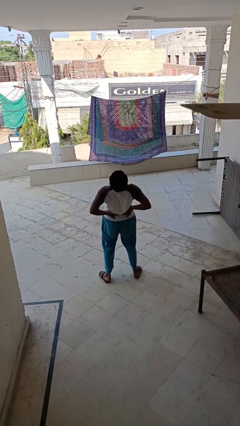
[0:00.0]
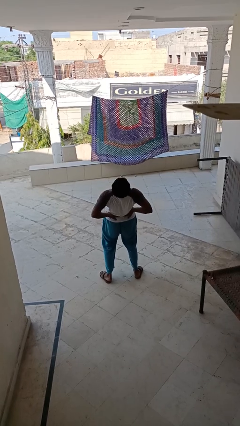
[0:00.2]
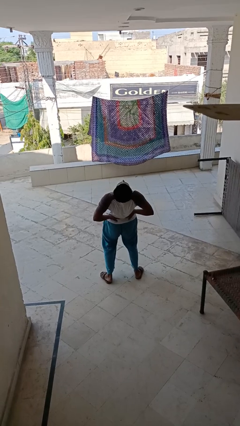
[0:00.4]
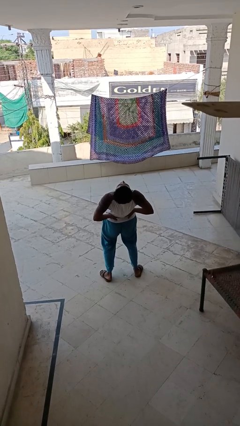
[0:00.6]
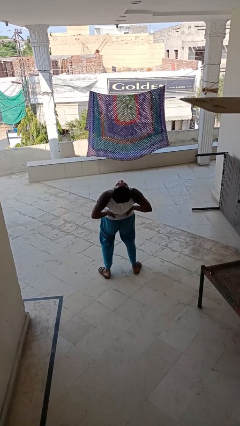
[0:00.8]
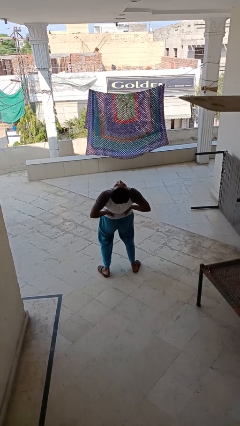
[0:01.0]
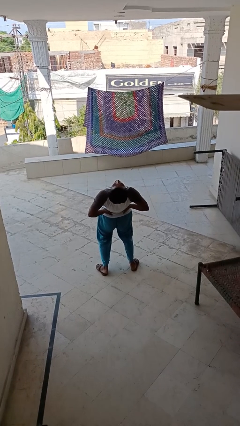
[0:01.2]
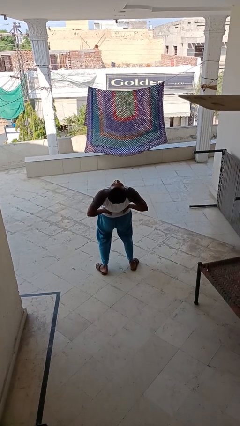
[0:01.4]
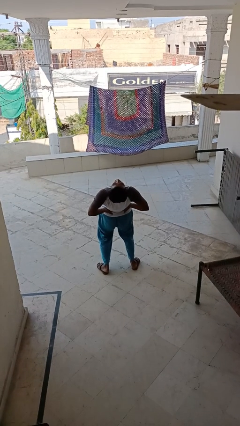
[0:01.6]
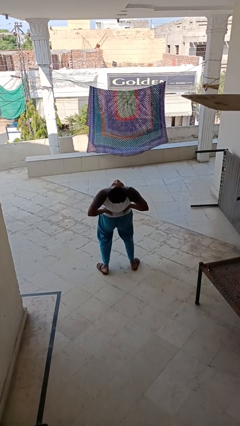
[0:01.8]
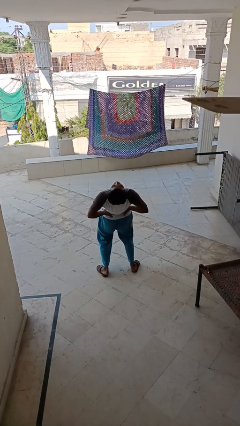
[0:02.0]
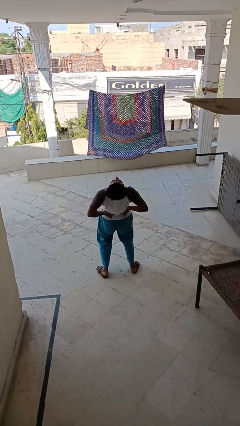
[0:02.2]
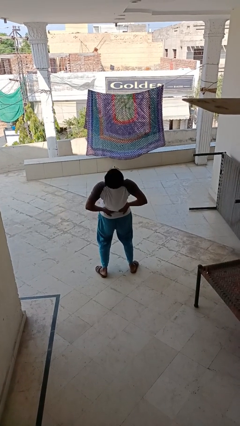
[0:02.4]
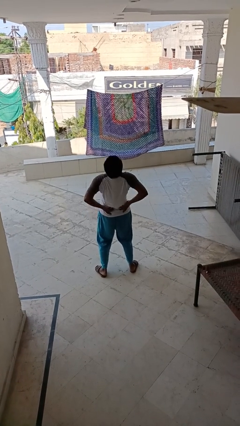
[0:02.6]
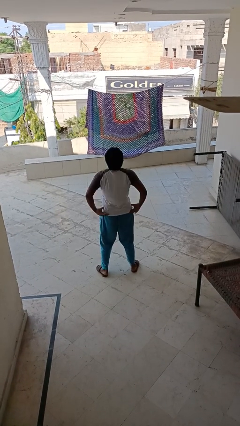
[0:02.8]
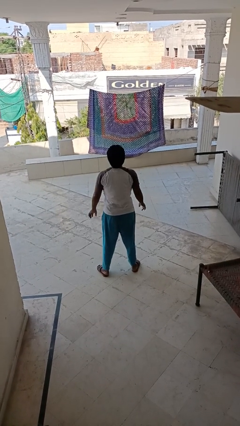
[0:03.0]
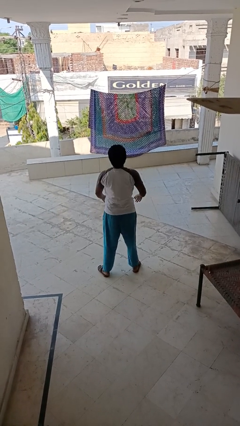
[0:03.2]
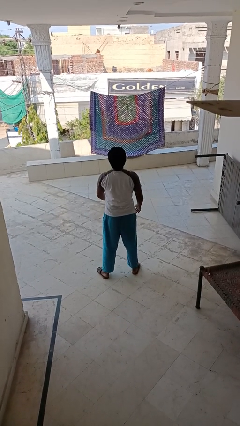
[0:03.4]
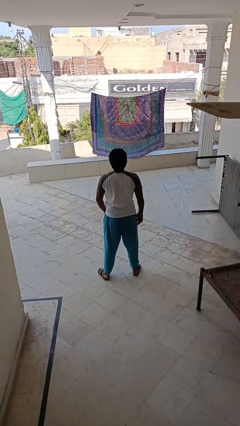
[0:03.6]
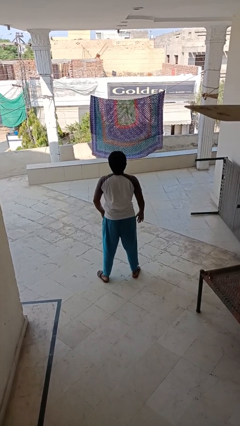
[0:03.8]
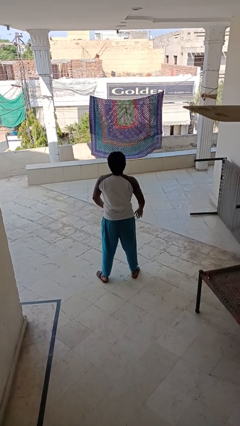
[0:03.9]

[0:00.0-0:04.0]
person stretches back

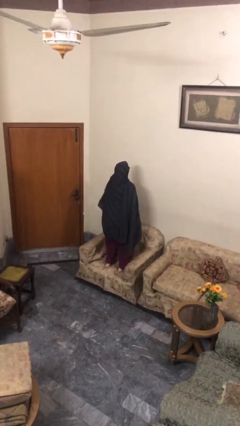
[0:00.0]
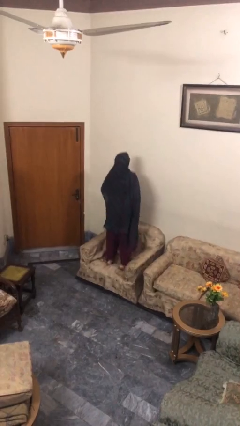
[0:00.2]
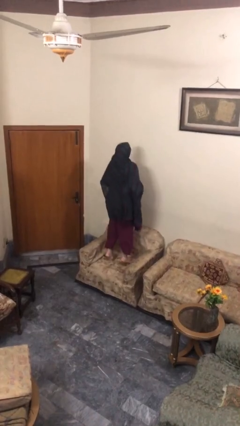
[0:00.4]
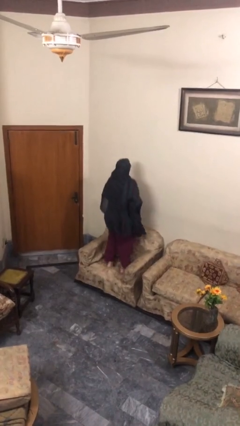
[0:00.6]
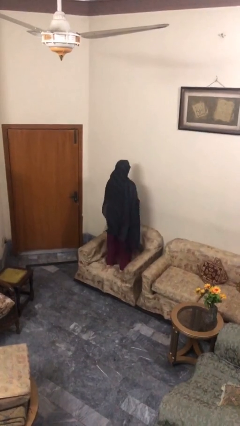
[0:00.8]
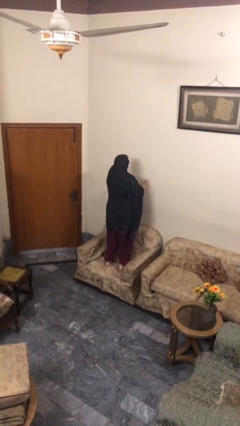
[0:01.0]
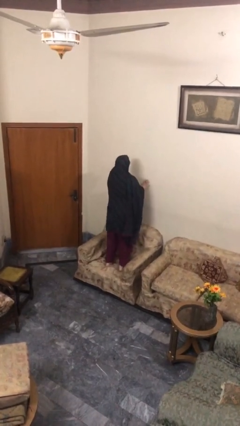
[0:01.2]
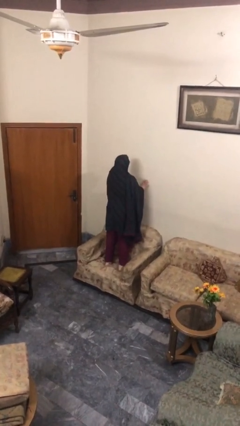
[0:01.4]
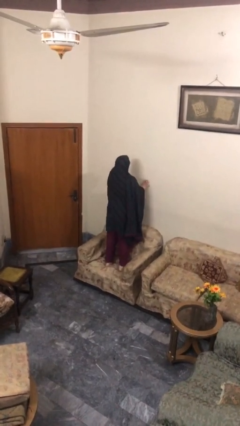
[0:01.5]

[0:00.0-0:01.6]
person jumps on couch

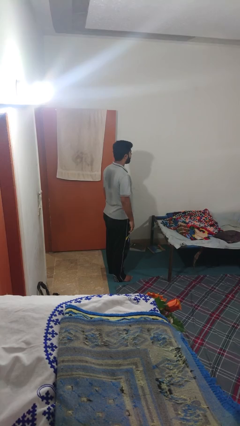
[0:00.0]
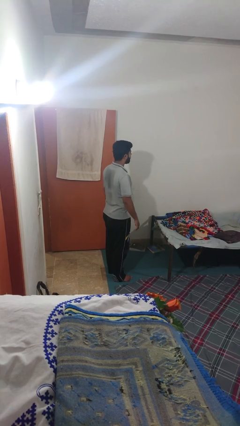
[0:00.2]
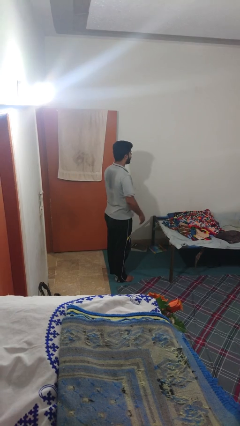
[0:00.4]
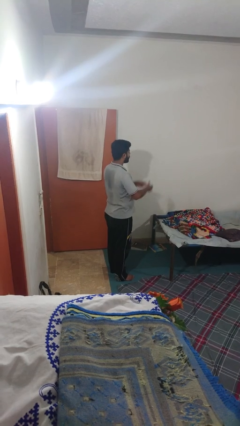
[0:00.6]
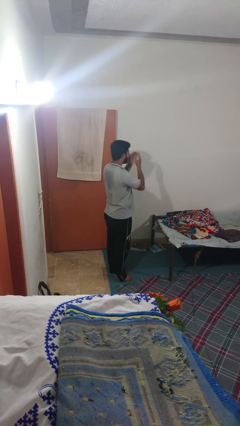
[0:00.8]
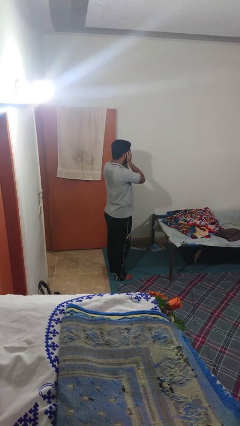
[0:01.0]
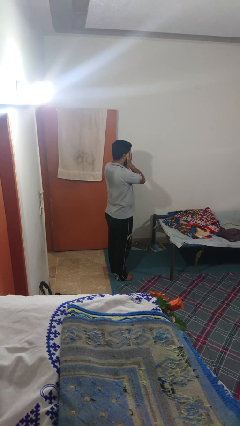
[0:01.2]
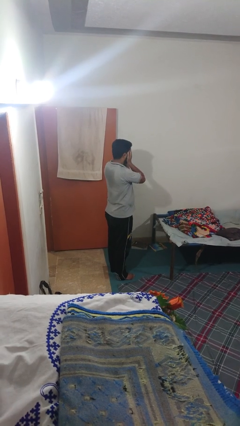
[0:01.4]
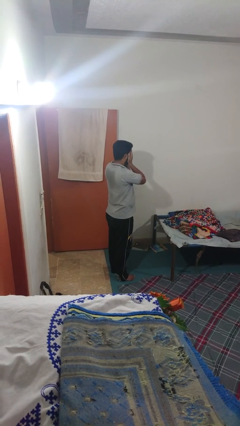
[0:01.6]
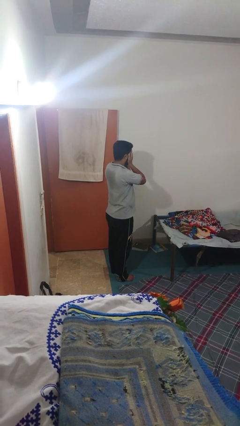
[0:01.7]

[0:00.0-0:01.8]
person covers face with hands

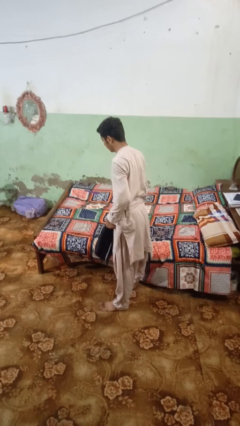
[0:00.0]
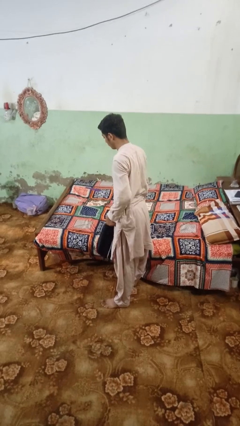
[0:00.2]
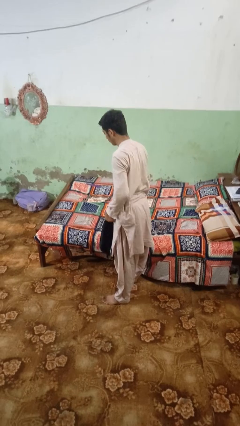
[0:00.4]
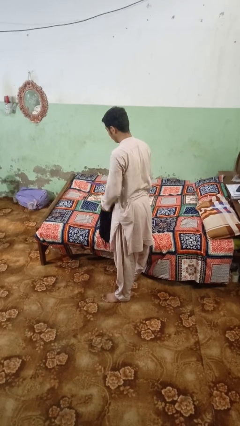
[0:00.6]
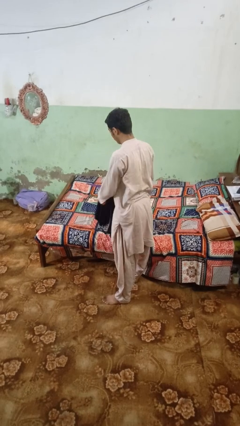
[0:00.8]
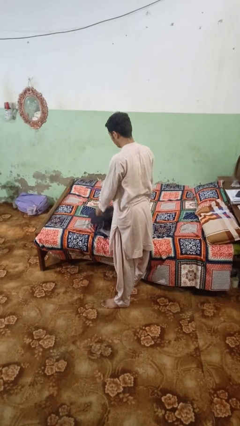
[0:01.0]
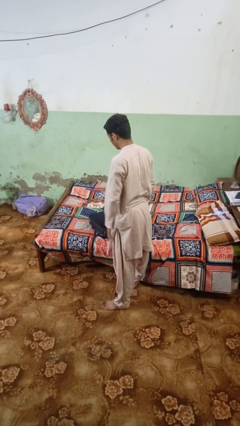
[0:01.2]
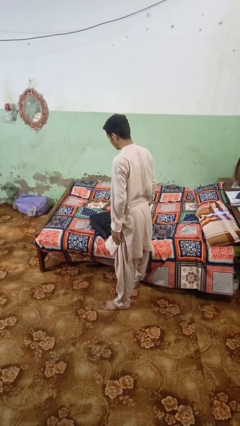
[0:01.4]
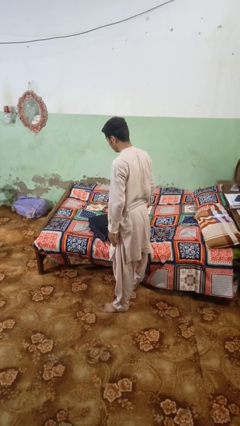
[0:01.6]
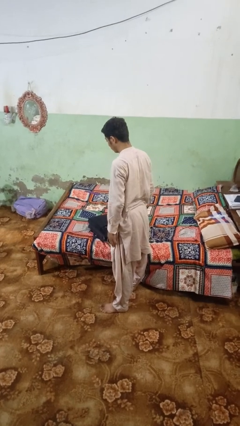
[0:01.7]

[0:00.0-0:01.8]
person puts down object on bed

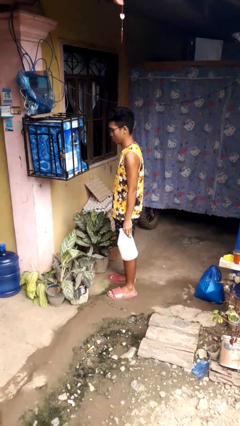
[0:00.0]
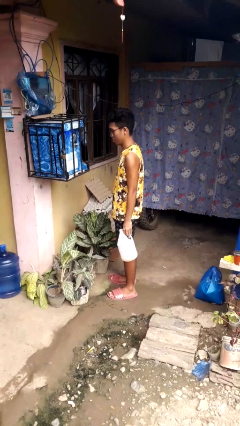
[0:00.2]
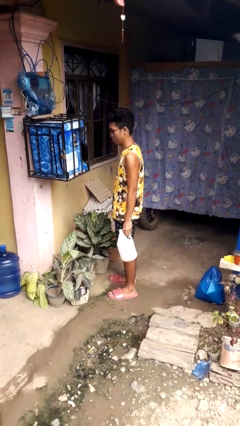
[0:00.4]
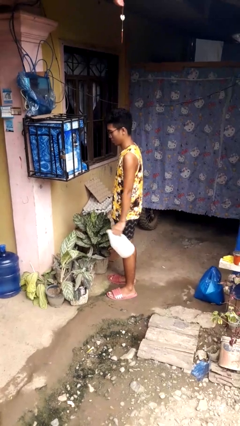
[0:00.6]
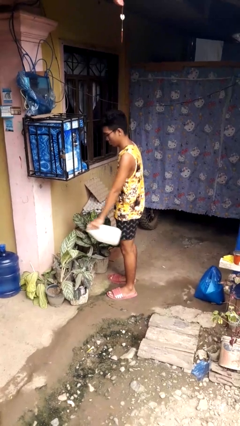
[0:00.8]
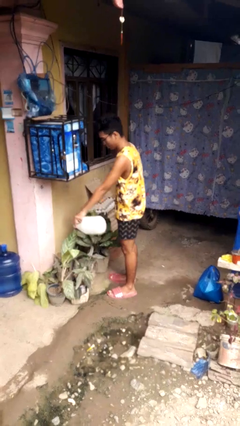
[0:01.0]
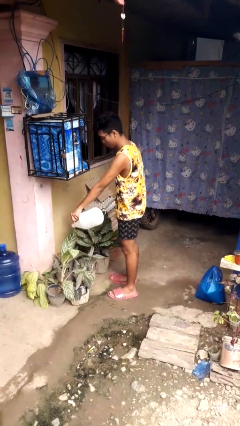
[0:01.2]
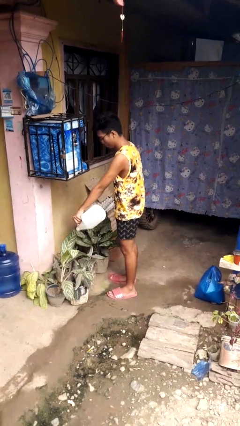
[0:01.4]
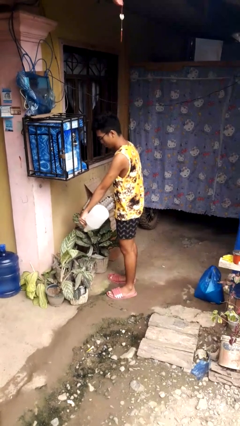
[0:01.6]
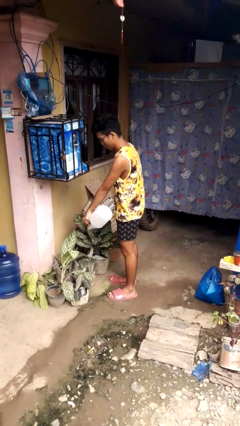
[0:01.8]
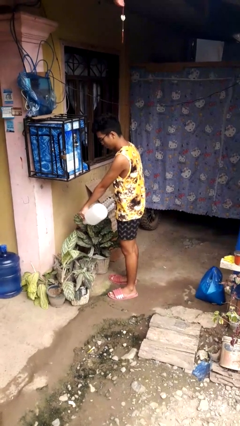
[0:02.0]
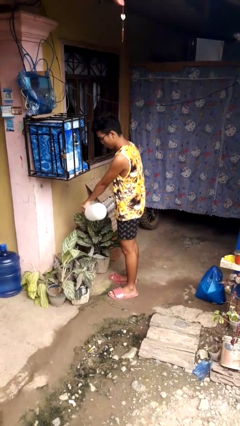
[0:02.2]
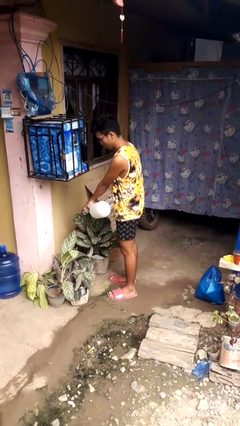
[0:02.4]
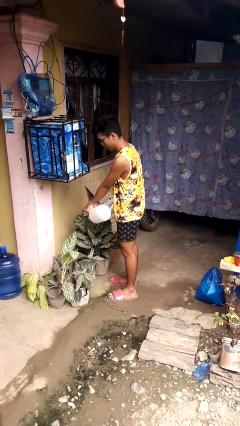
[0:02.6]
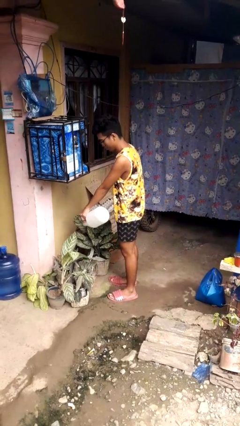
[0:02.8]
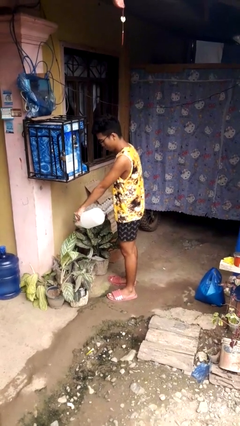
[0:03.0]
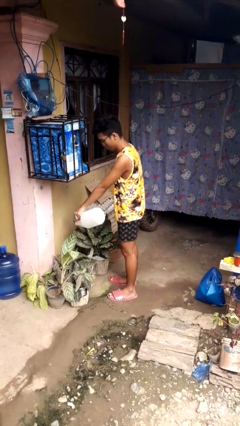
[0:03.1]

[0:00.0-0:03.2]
person waters houseplant

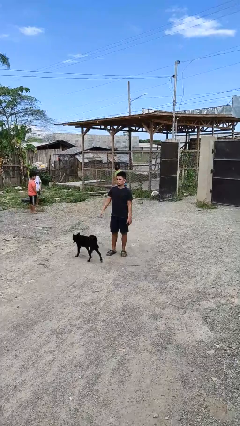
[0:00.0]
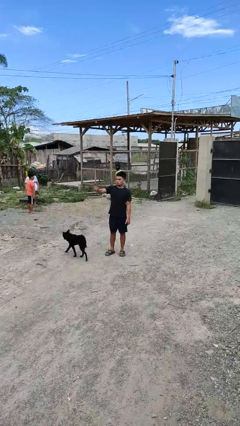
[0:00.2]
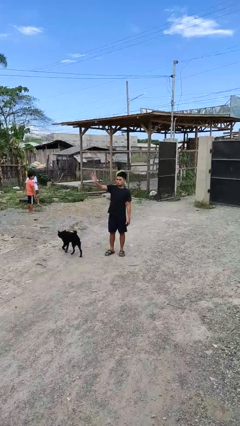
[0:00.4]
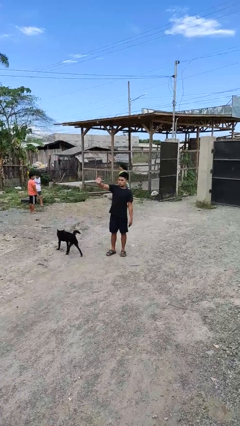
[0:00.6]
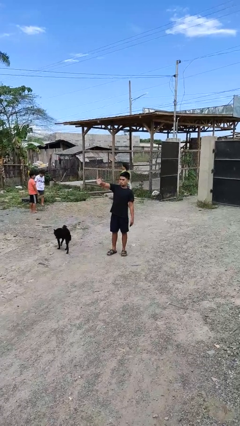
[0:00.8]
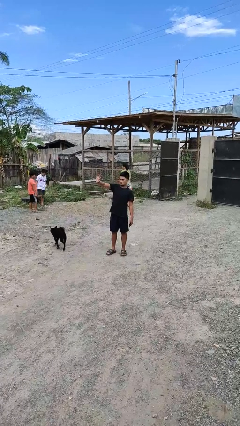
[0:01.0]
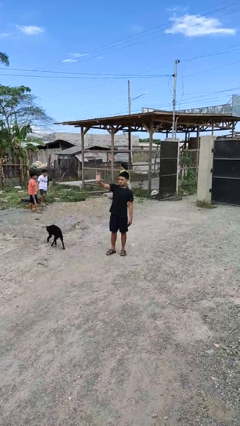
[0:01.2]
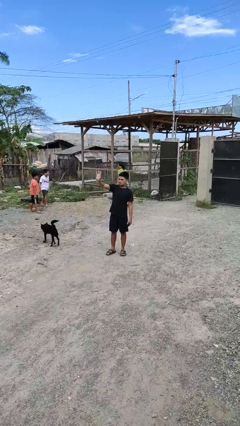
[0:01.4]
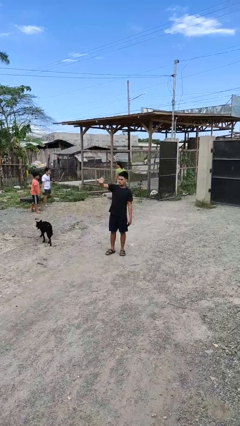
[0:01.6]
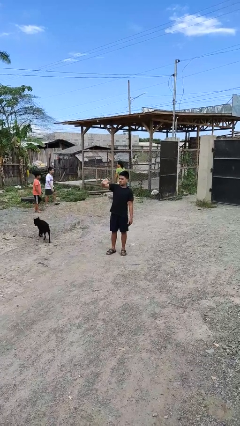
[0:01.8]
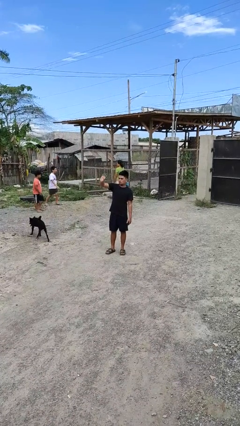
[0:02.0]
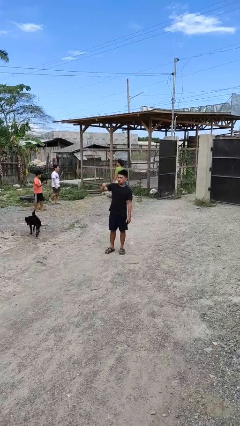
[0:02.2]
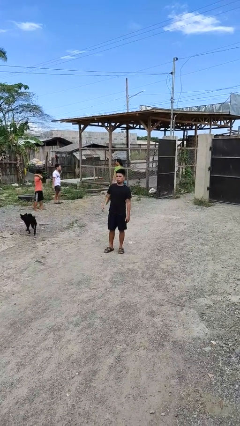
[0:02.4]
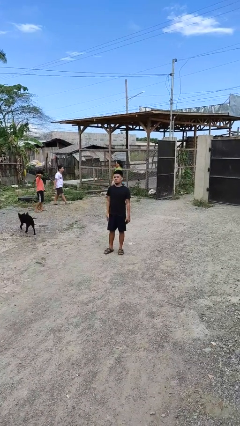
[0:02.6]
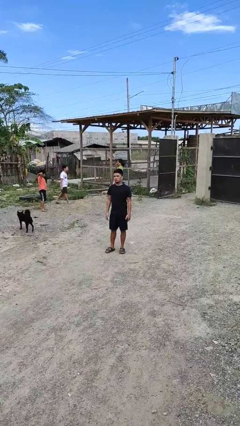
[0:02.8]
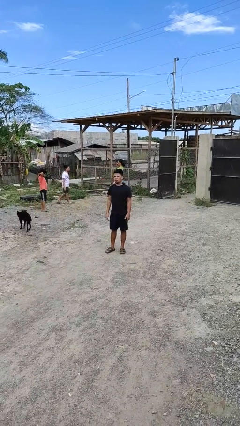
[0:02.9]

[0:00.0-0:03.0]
person waves at person

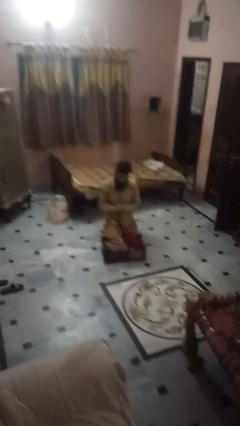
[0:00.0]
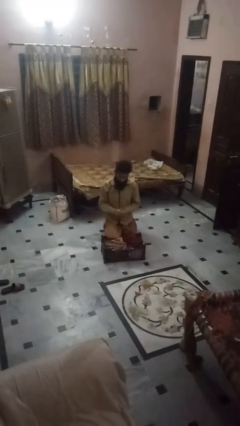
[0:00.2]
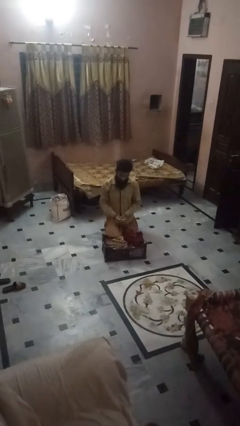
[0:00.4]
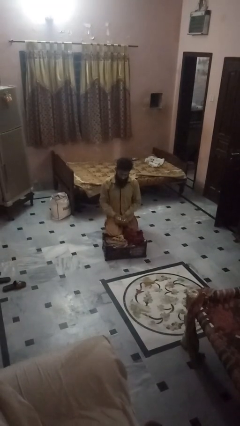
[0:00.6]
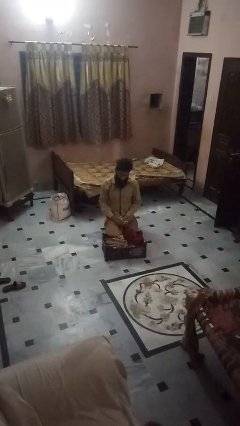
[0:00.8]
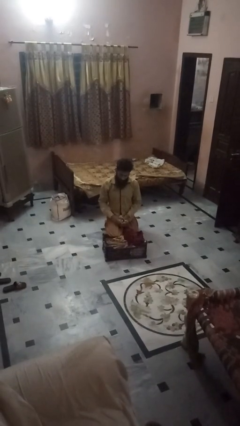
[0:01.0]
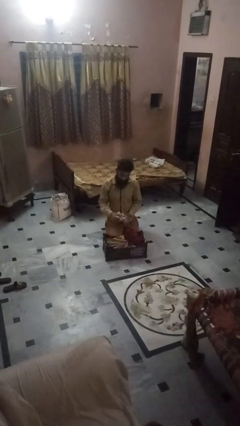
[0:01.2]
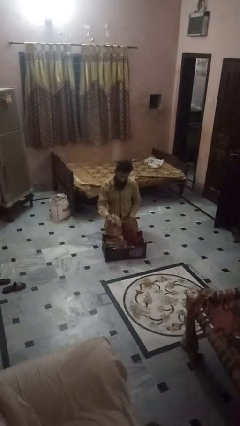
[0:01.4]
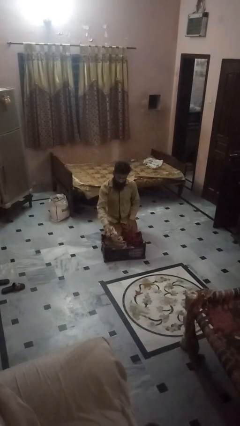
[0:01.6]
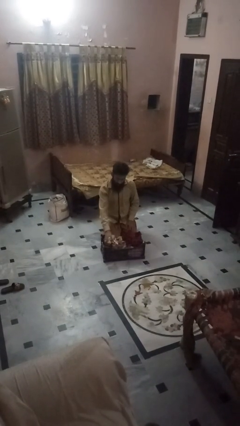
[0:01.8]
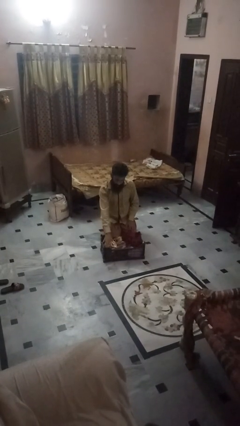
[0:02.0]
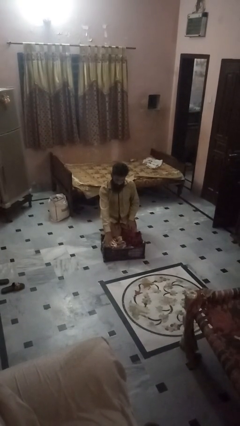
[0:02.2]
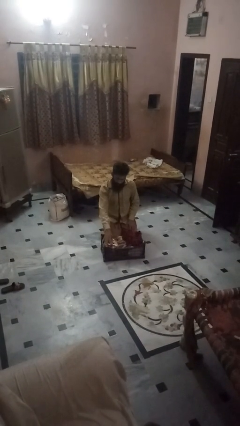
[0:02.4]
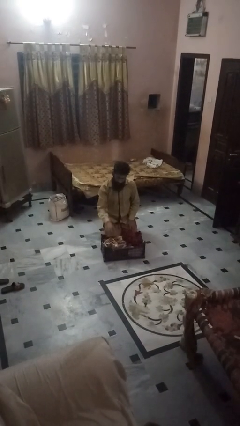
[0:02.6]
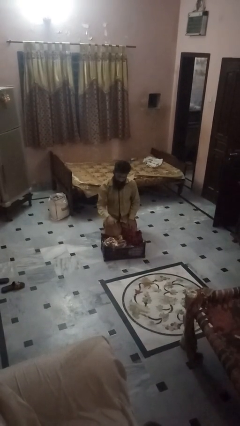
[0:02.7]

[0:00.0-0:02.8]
person takes object from basket
